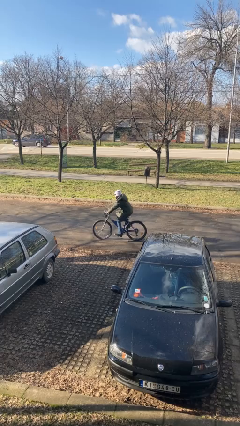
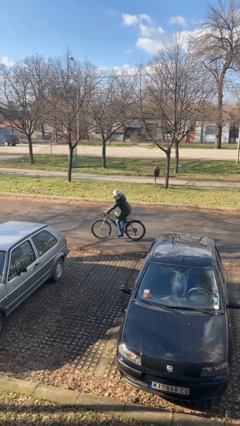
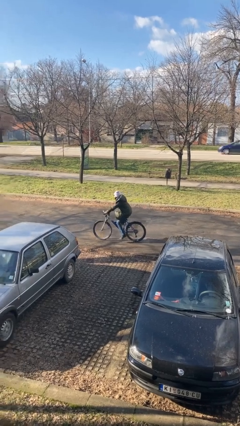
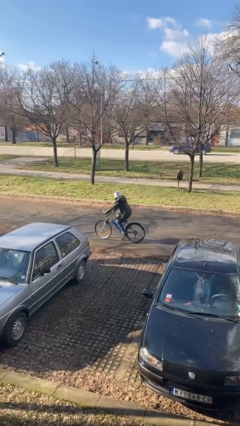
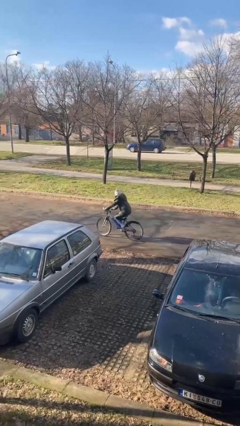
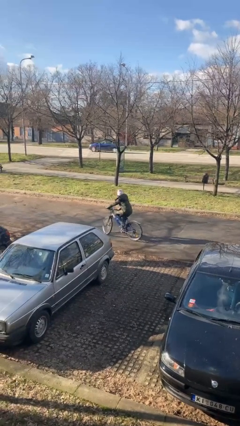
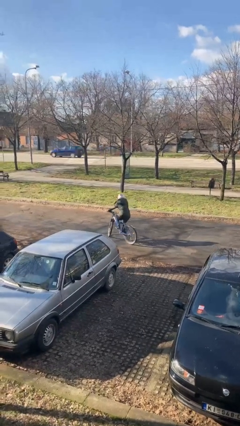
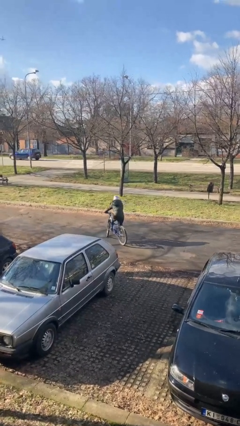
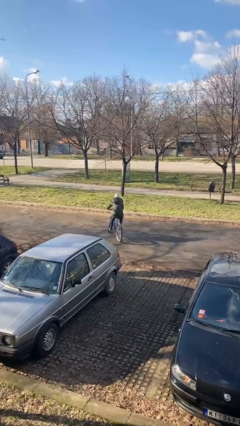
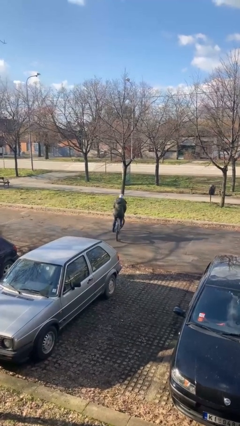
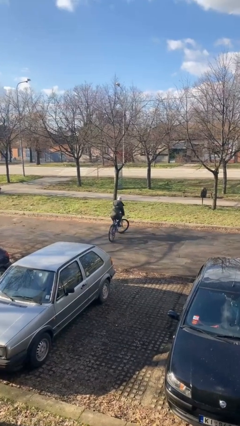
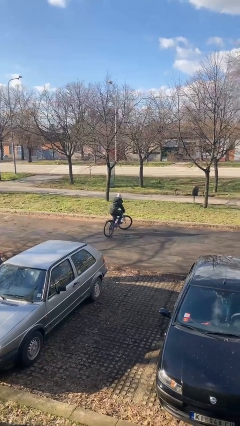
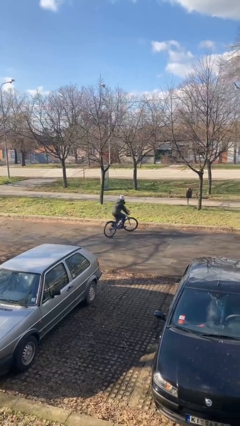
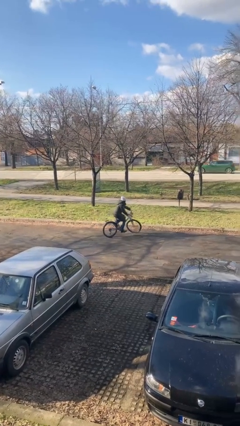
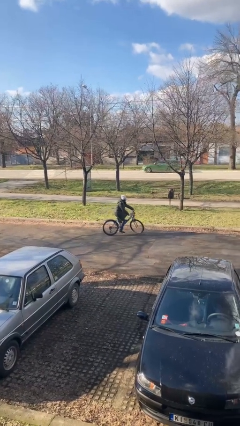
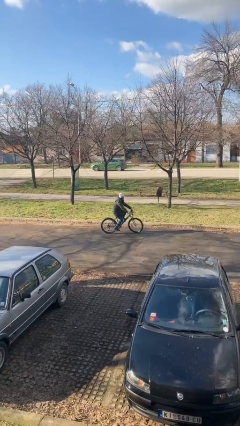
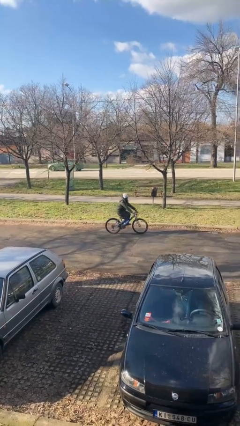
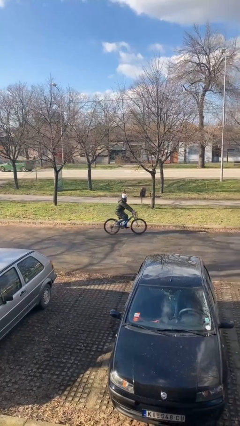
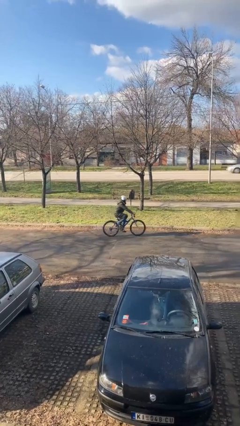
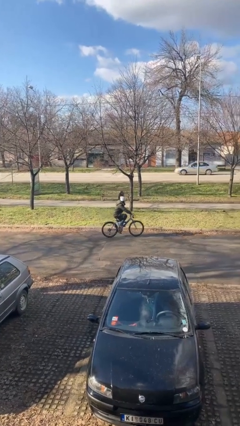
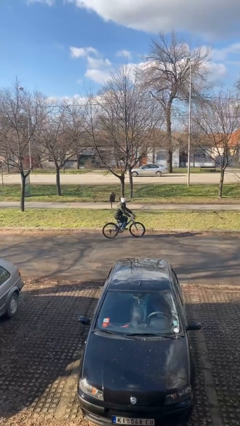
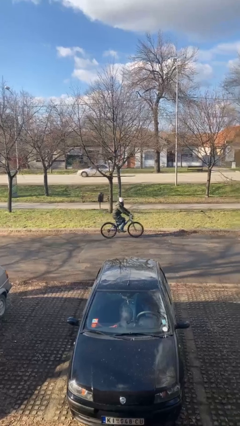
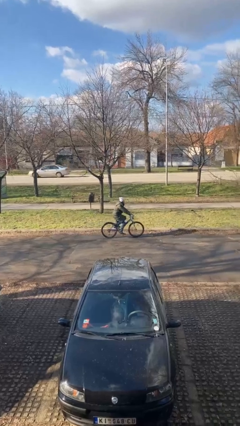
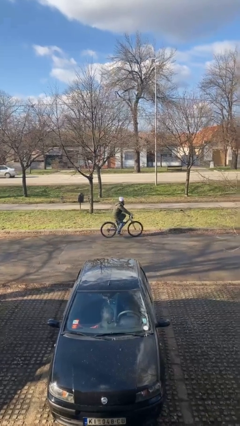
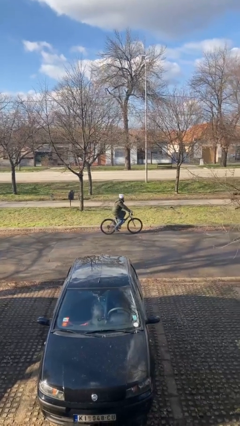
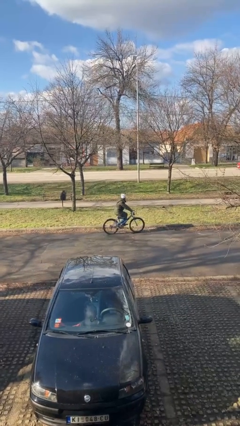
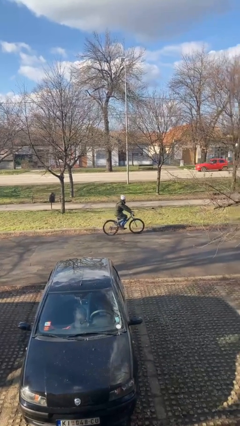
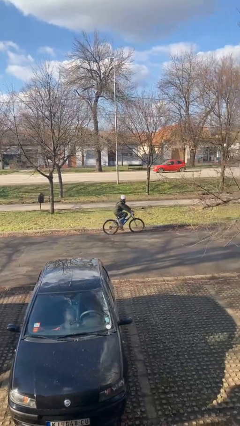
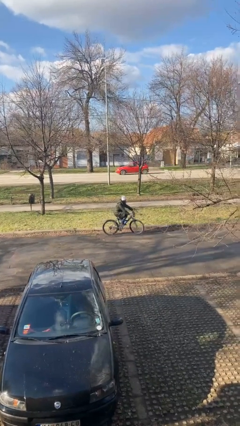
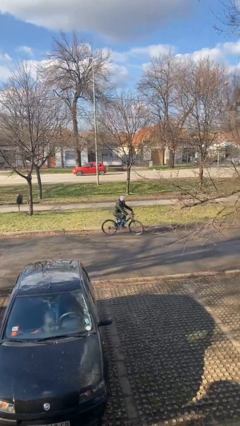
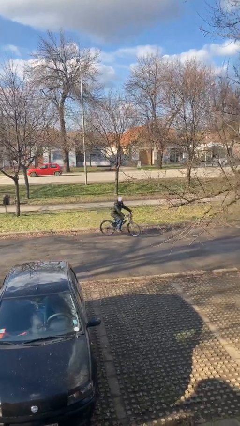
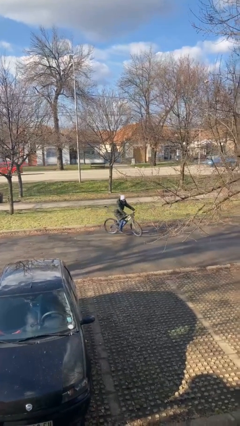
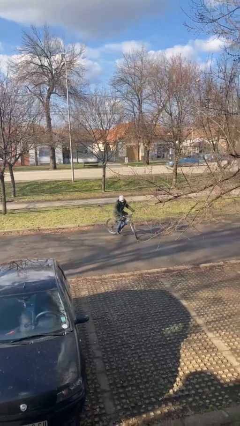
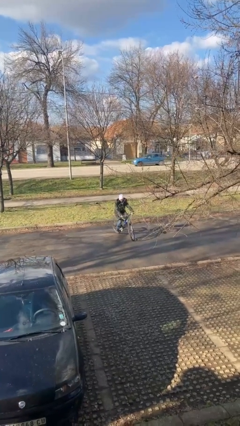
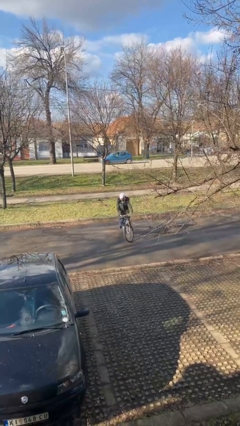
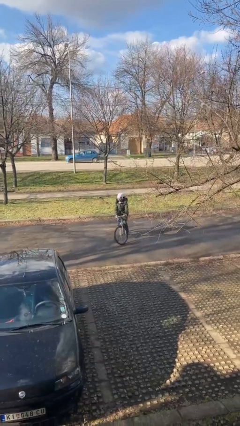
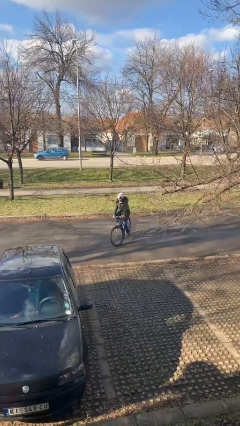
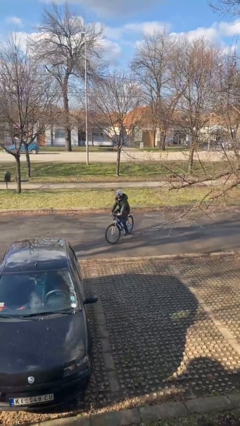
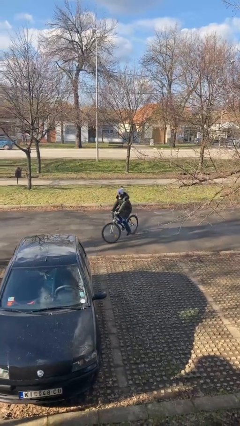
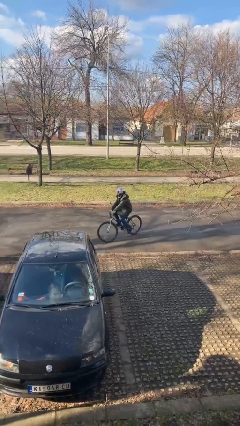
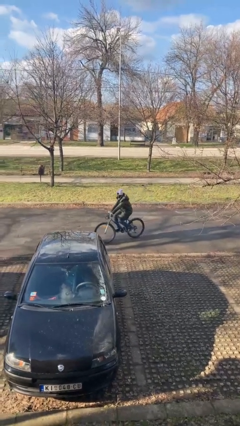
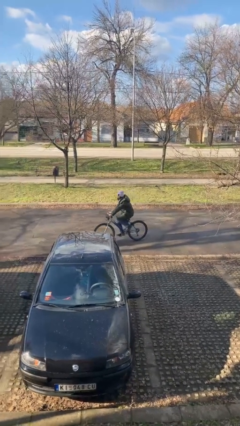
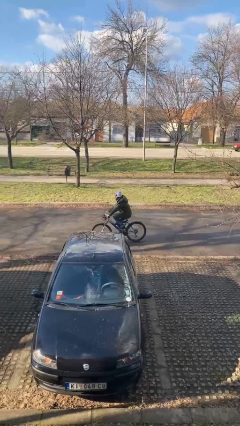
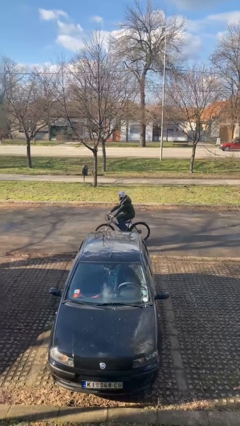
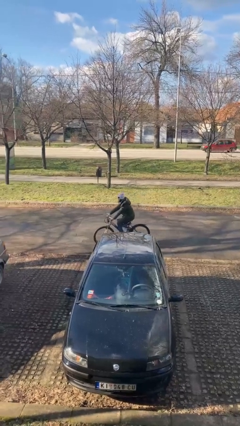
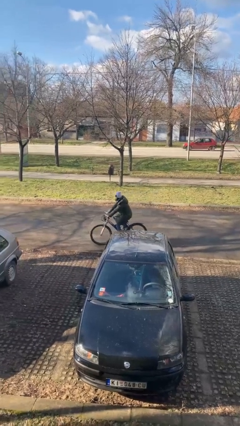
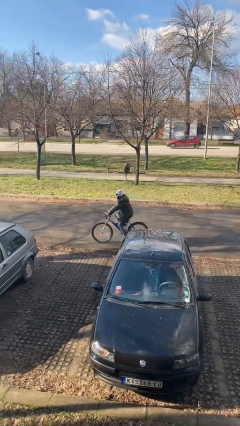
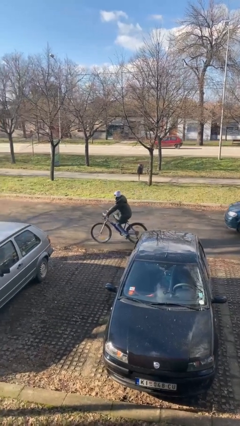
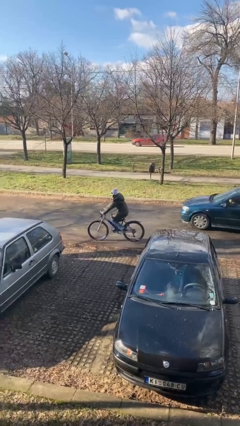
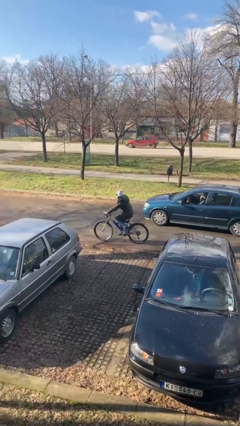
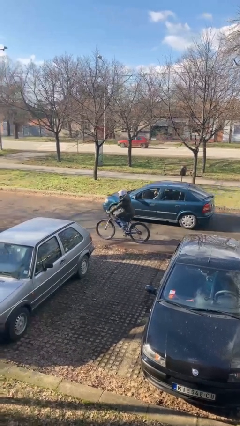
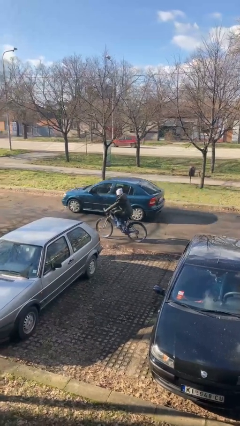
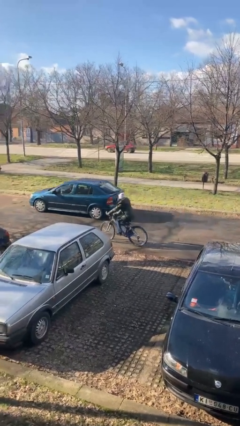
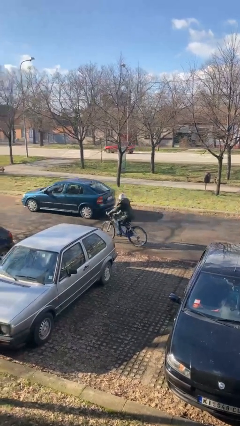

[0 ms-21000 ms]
person rides bicycle

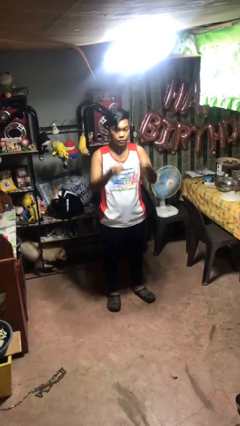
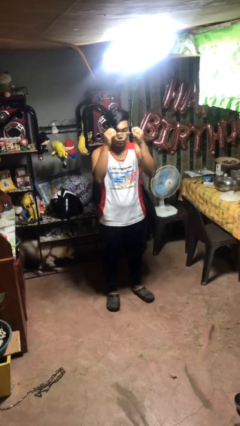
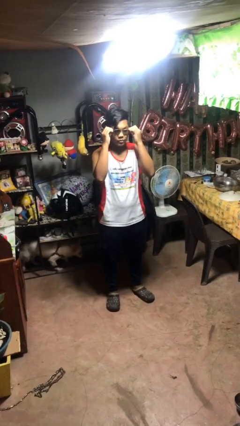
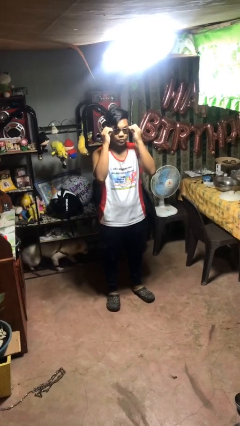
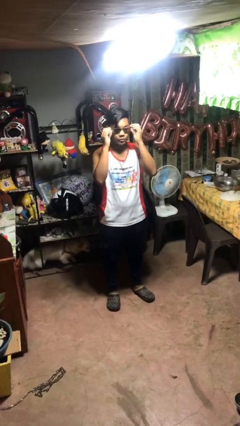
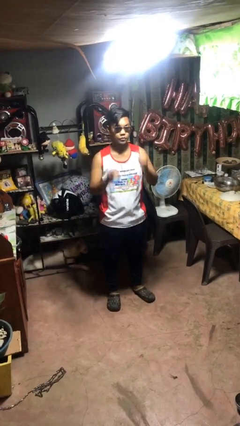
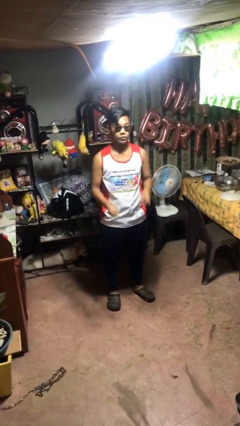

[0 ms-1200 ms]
person puts on sunglasses

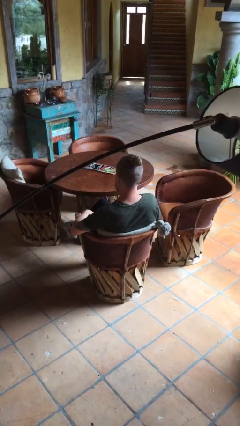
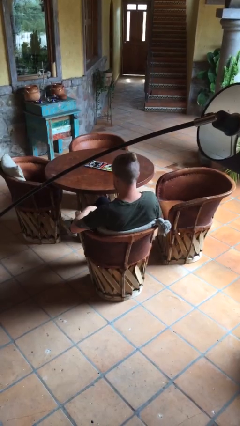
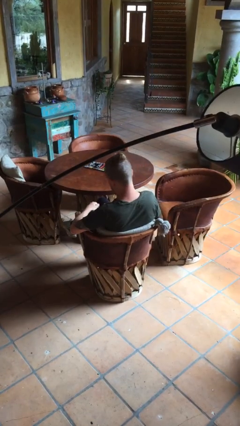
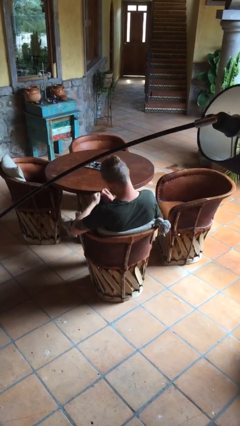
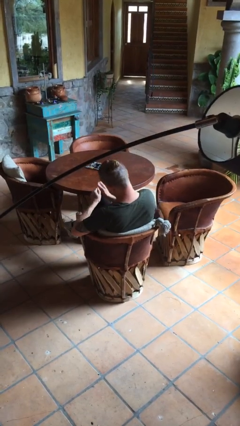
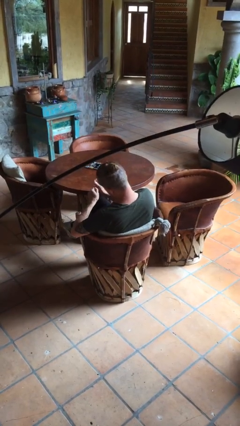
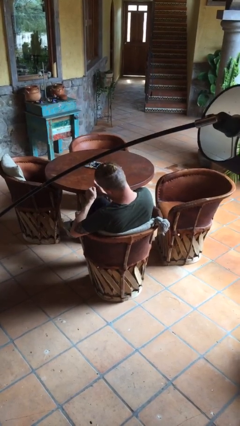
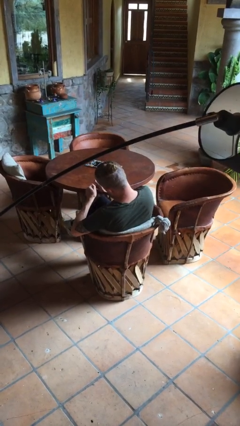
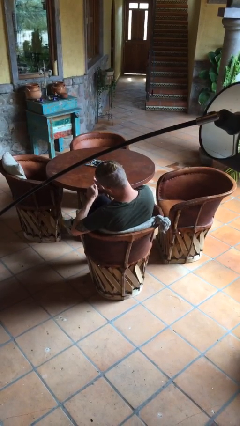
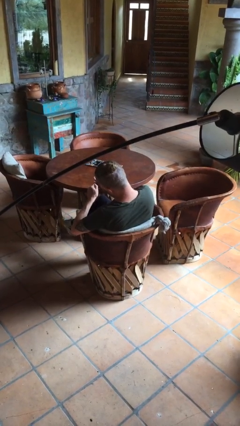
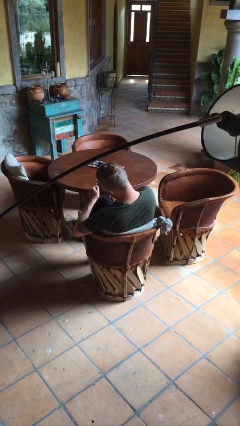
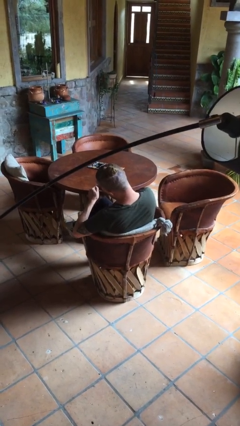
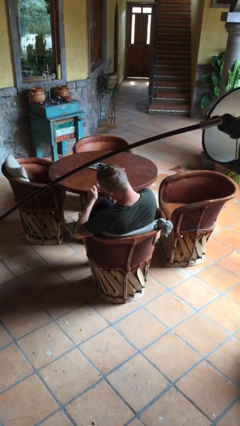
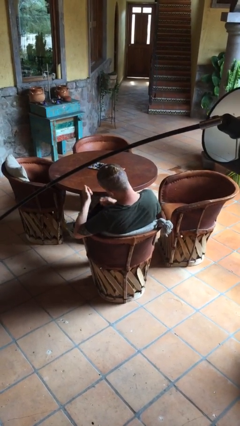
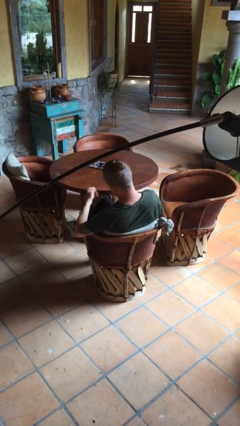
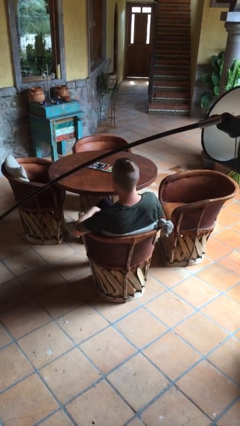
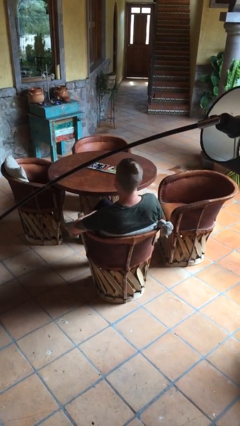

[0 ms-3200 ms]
person files fingernails

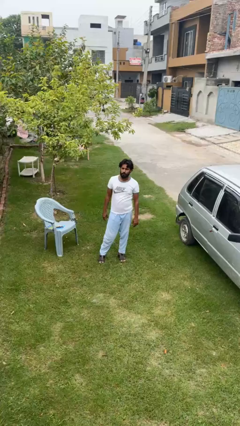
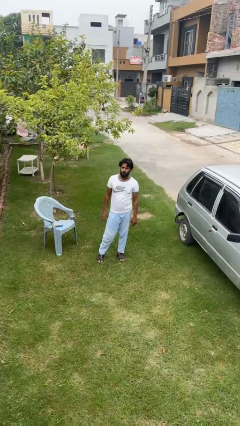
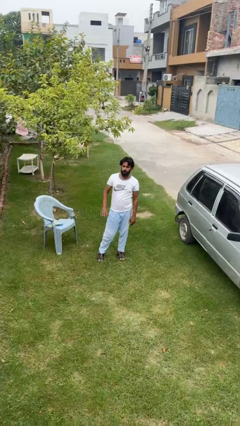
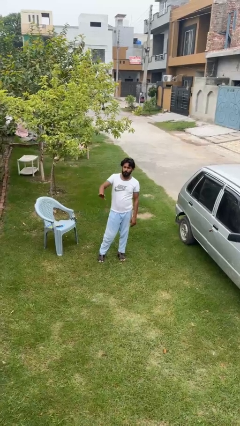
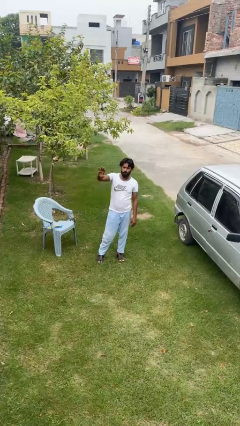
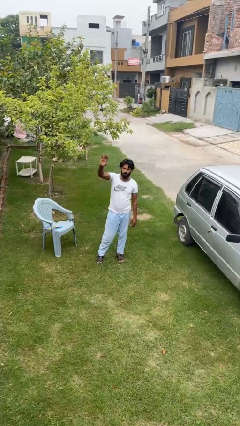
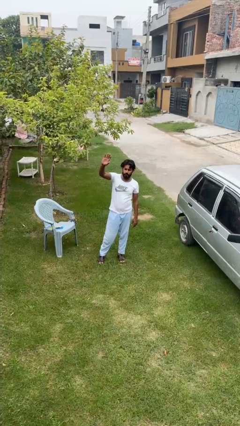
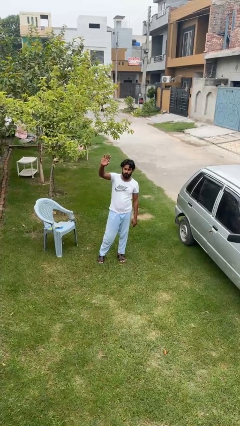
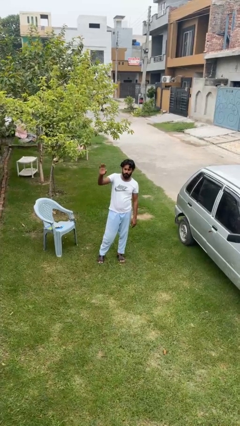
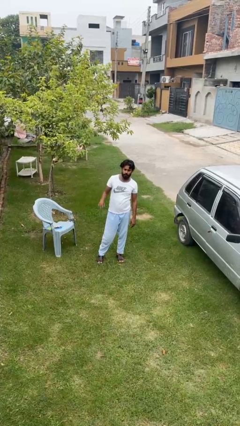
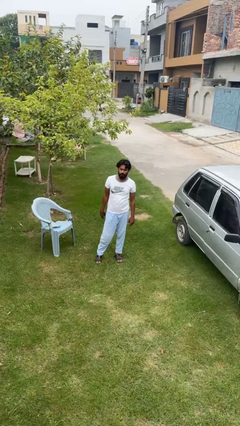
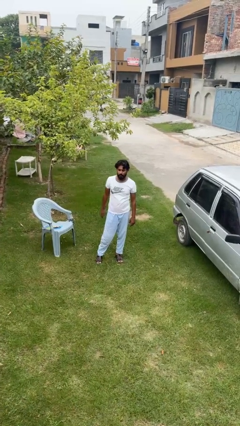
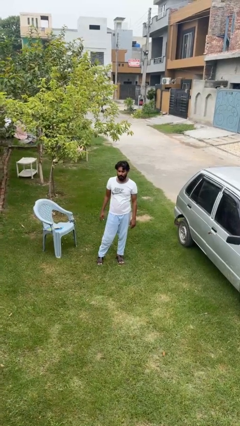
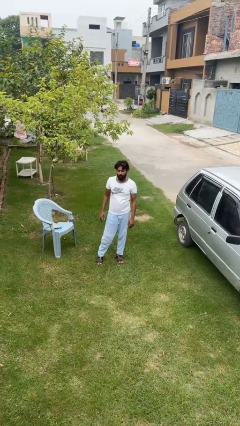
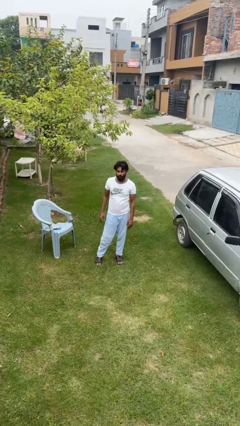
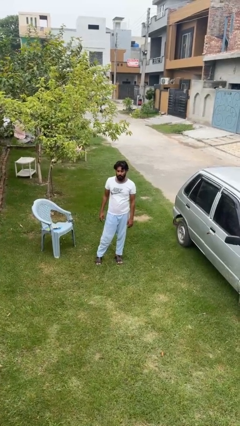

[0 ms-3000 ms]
person gestures swipe up
